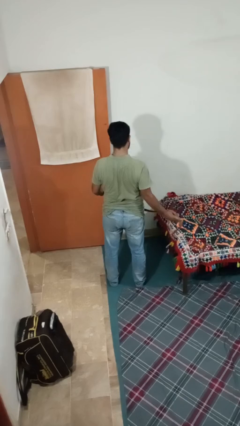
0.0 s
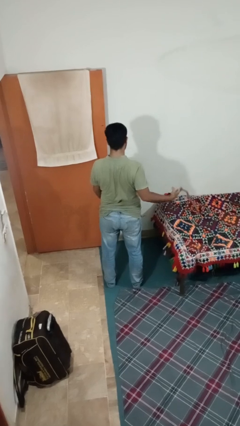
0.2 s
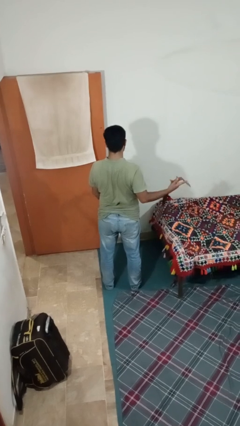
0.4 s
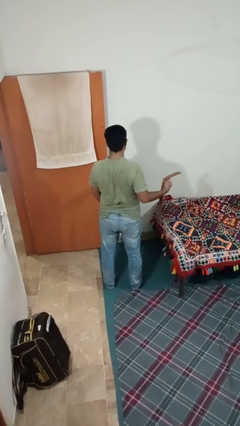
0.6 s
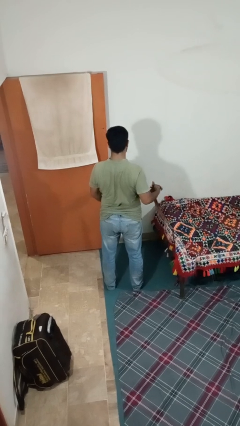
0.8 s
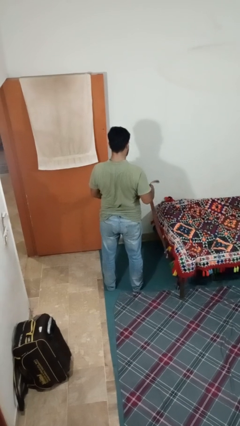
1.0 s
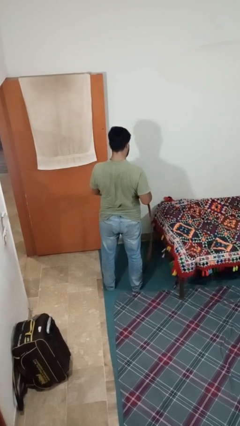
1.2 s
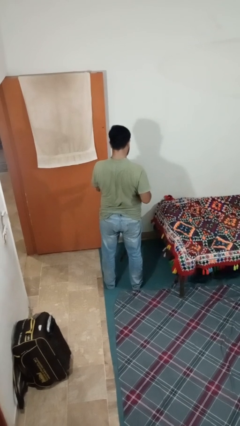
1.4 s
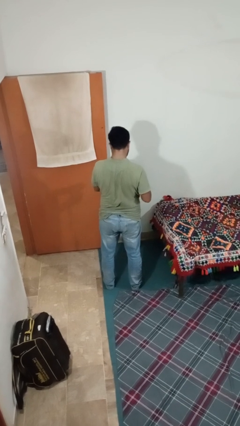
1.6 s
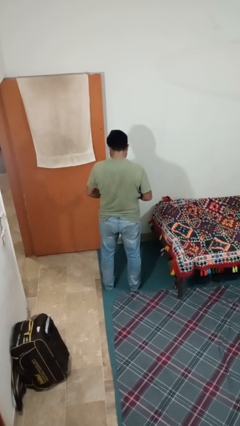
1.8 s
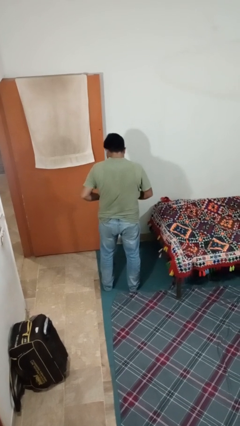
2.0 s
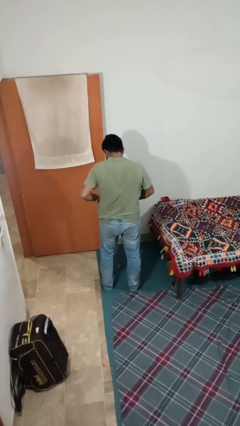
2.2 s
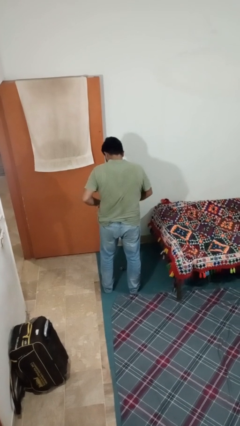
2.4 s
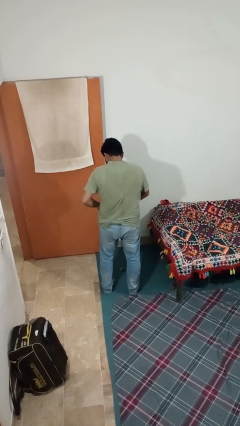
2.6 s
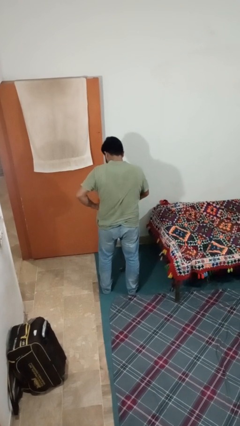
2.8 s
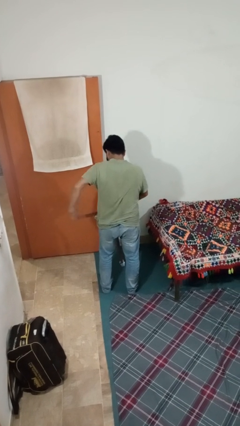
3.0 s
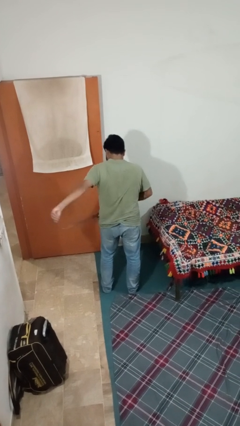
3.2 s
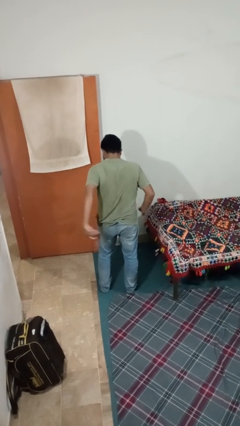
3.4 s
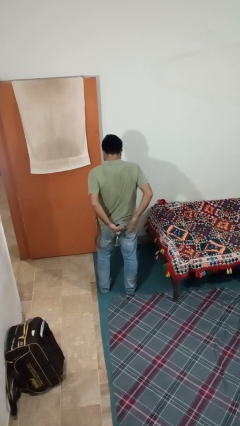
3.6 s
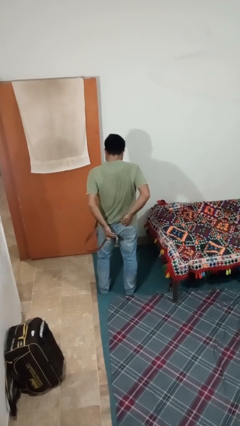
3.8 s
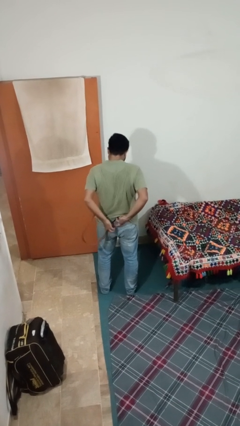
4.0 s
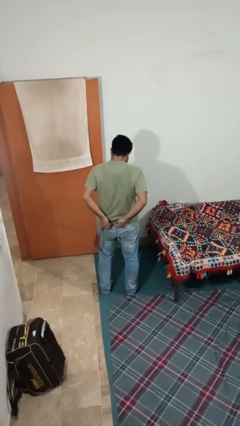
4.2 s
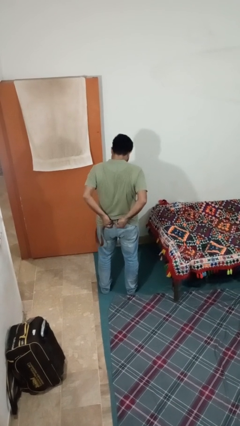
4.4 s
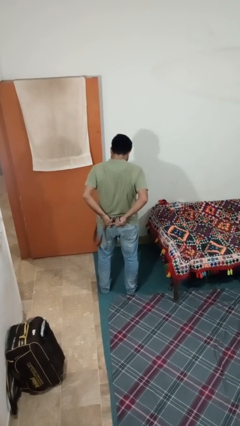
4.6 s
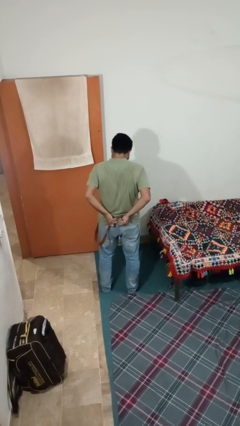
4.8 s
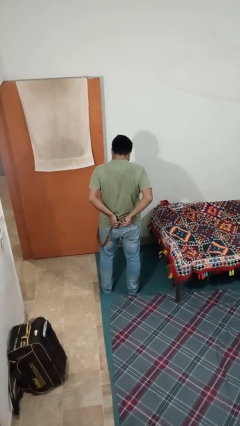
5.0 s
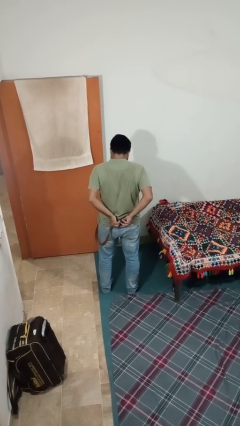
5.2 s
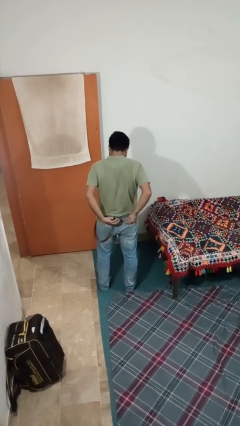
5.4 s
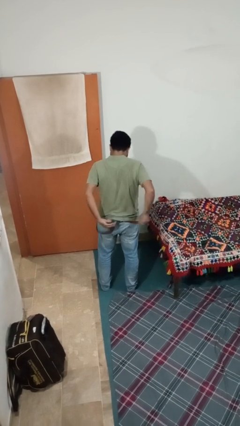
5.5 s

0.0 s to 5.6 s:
person puts on belt

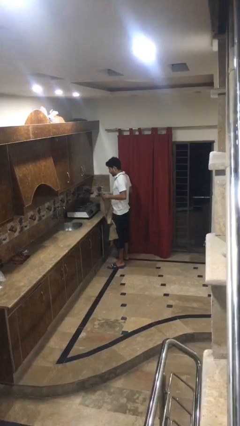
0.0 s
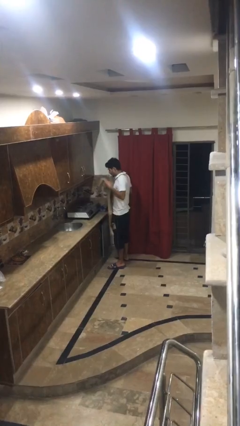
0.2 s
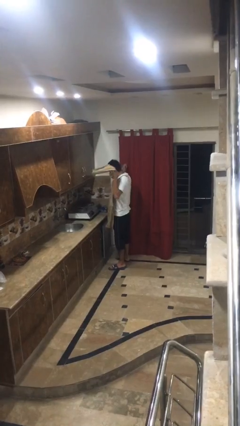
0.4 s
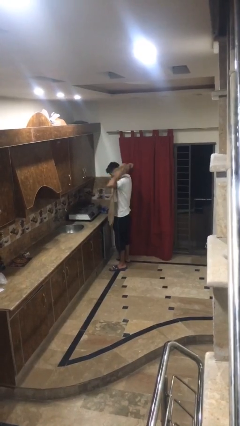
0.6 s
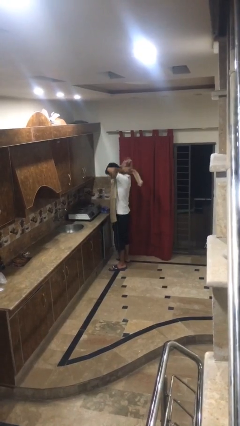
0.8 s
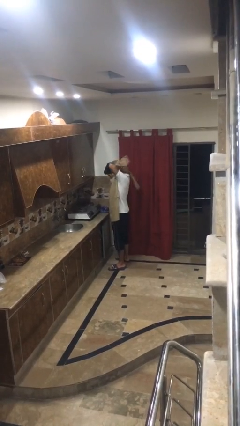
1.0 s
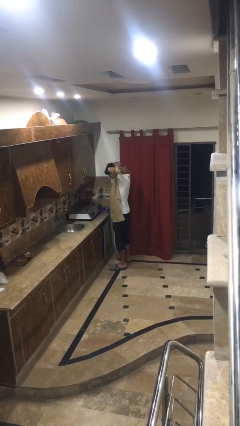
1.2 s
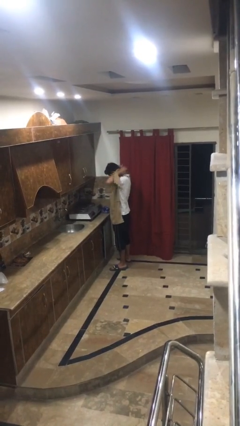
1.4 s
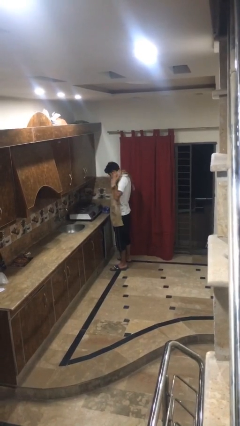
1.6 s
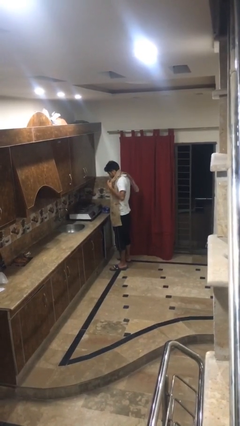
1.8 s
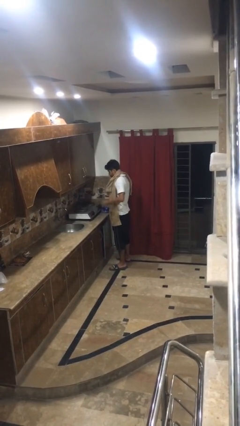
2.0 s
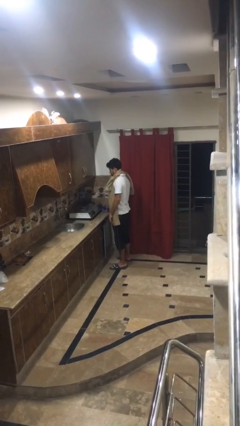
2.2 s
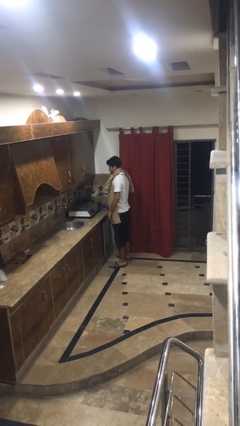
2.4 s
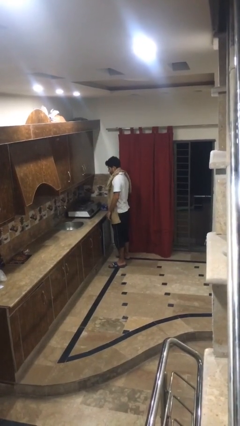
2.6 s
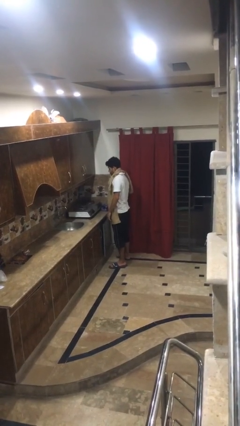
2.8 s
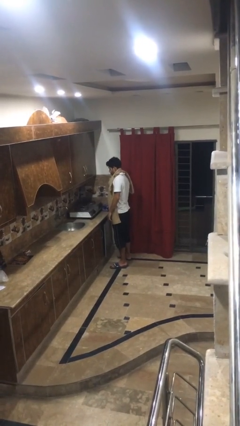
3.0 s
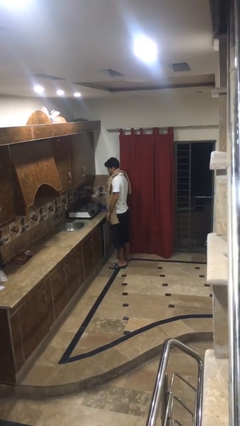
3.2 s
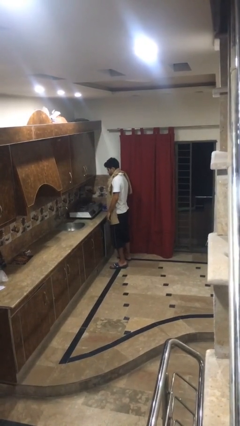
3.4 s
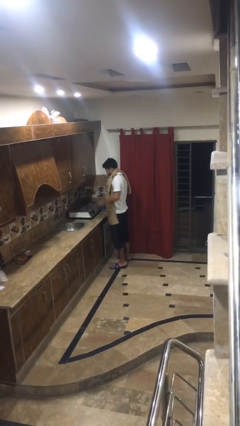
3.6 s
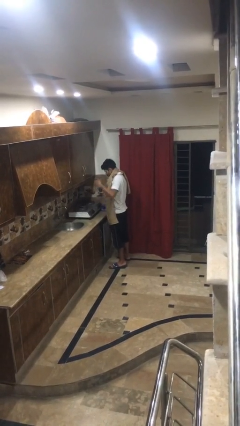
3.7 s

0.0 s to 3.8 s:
person puts on apron

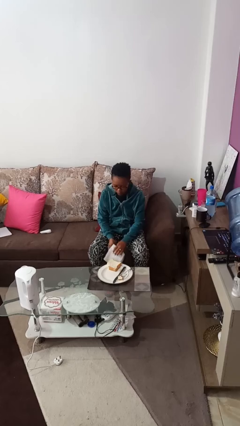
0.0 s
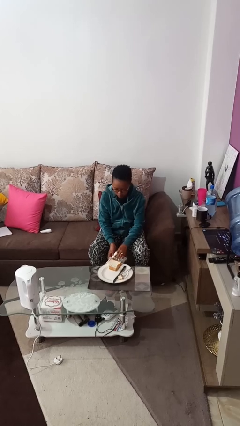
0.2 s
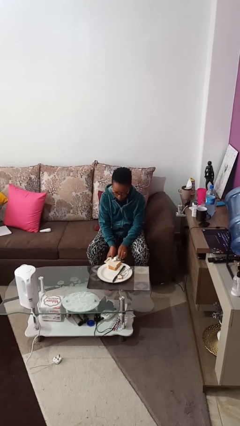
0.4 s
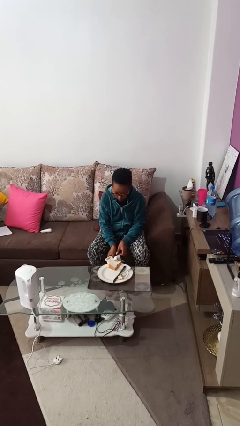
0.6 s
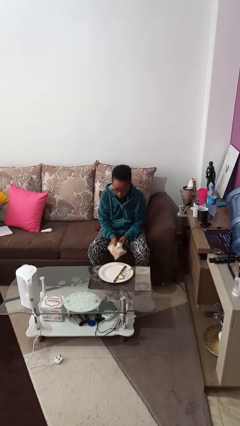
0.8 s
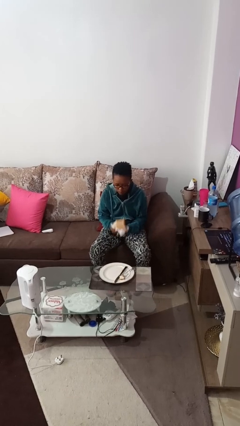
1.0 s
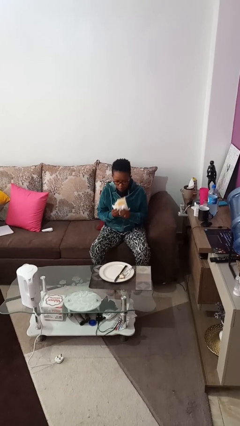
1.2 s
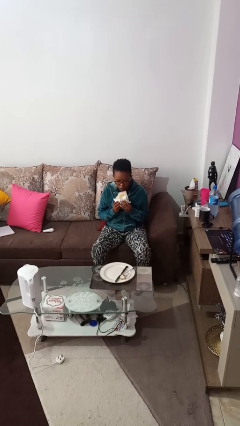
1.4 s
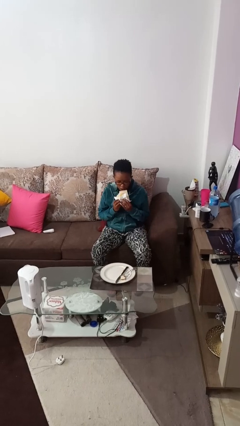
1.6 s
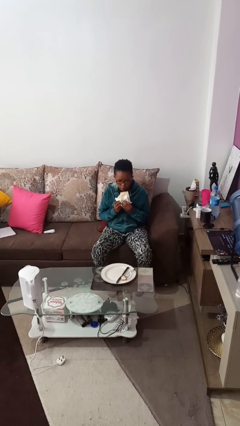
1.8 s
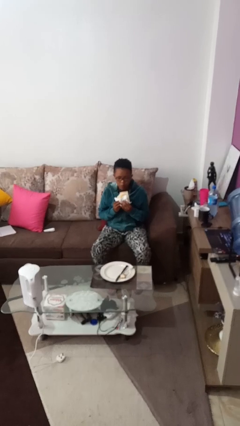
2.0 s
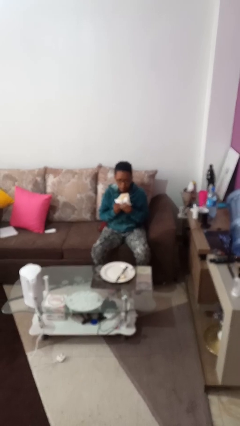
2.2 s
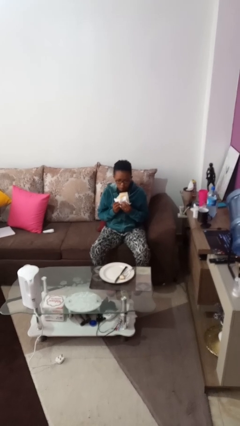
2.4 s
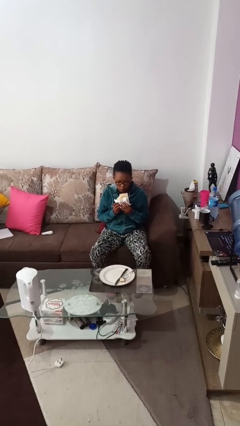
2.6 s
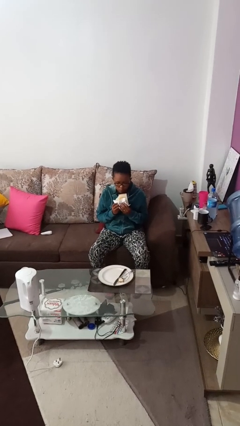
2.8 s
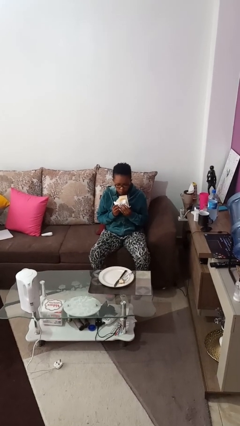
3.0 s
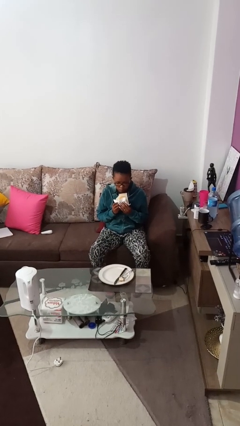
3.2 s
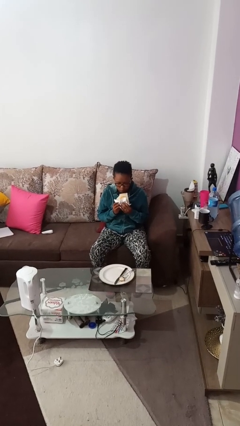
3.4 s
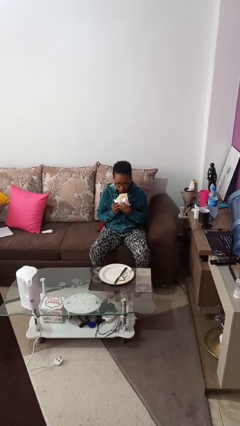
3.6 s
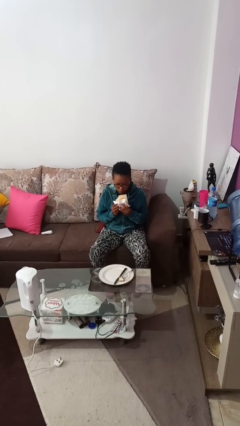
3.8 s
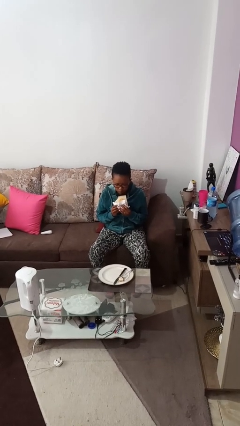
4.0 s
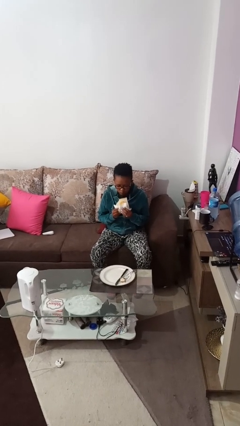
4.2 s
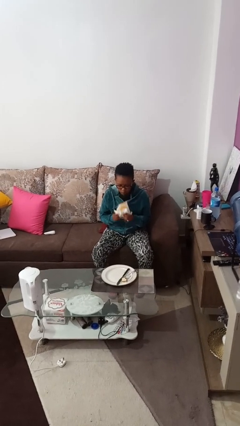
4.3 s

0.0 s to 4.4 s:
person eats with hands

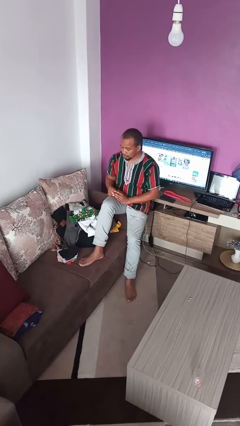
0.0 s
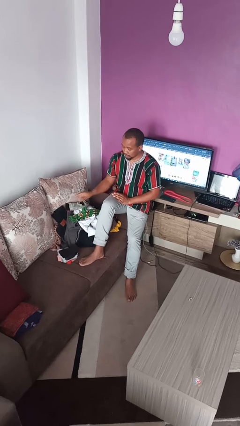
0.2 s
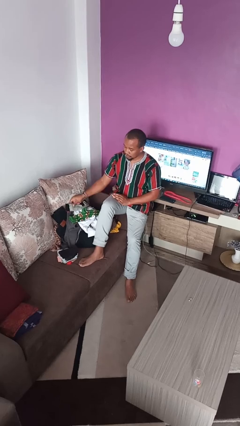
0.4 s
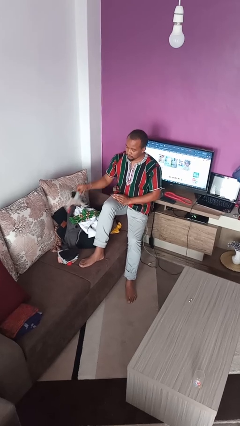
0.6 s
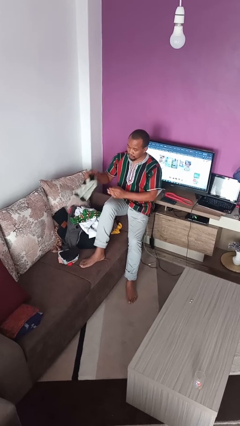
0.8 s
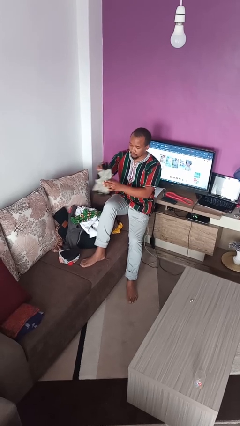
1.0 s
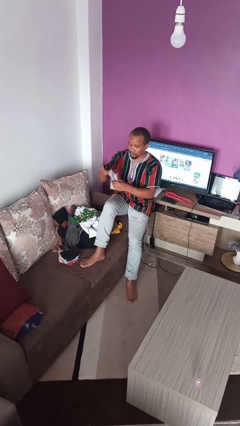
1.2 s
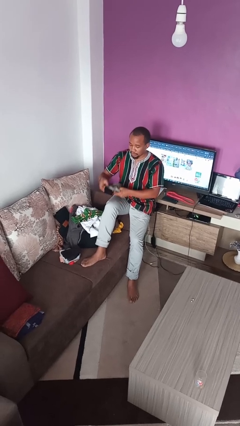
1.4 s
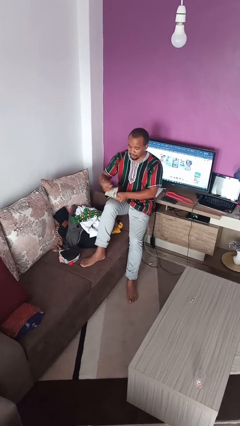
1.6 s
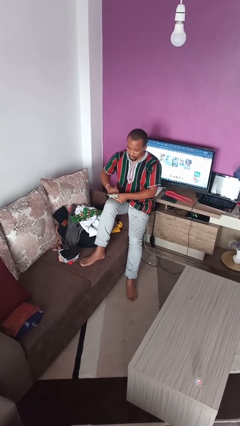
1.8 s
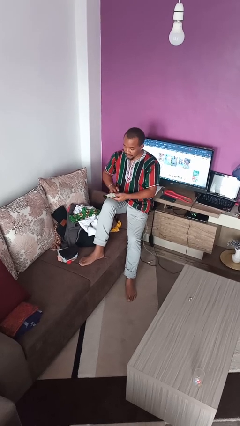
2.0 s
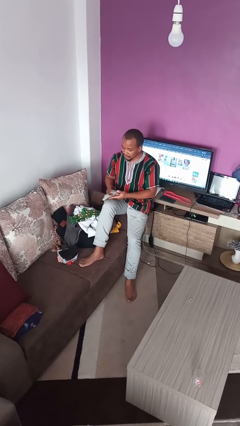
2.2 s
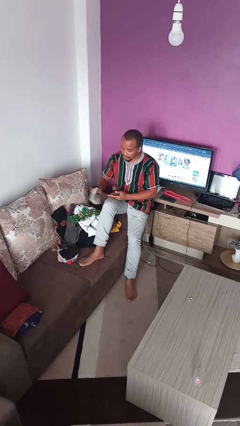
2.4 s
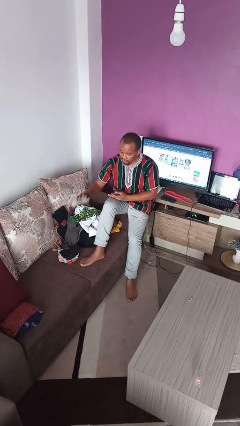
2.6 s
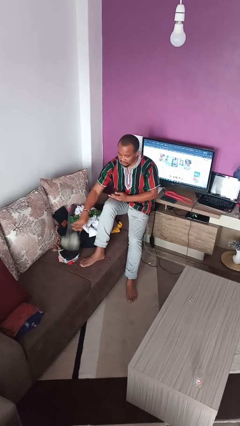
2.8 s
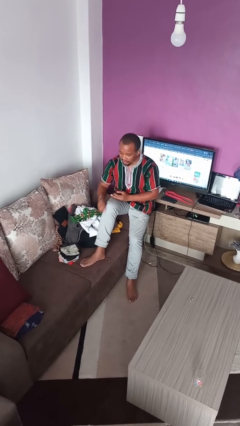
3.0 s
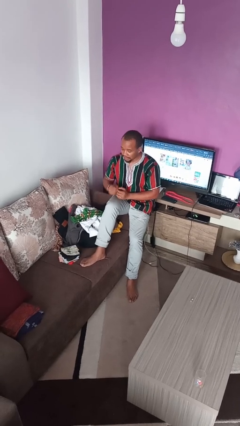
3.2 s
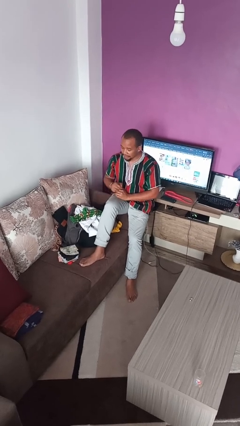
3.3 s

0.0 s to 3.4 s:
person folds socks

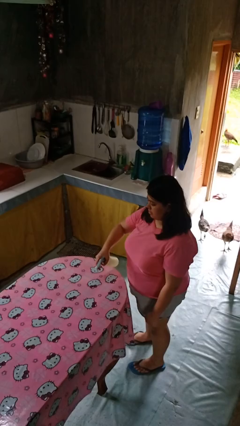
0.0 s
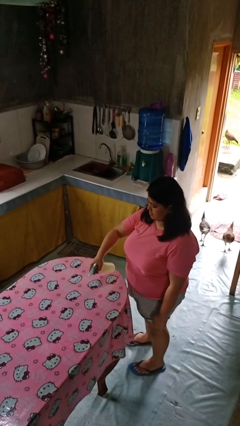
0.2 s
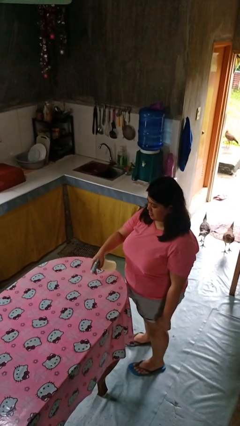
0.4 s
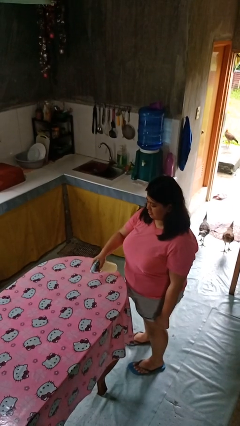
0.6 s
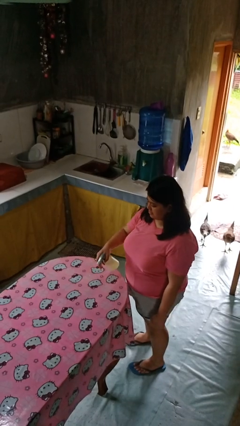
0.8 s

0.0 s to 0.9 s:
person sprays from bottle
